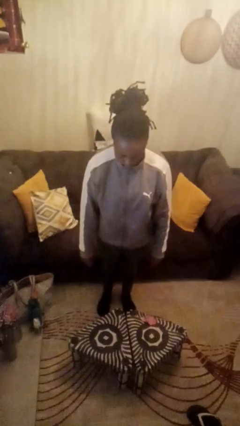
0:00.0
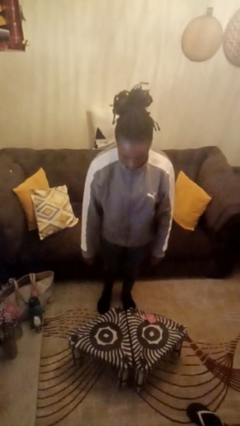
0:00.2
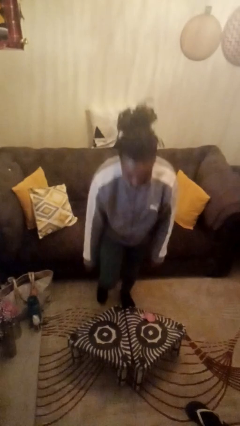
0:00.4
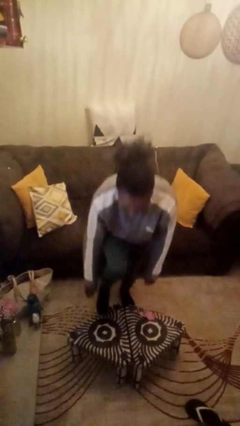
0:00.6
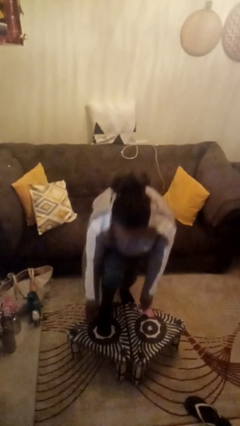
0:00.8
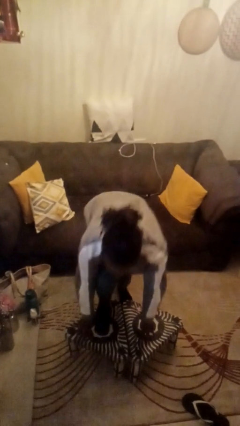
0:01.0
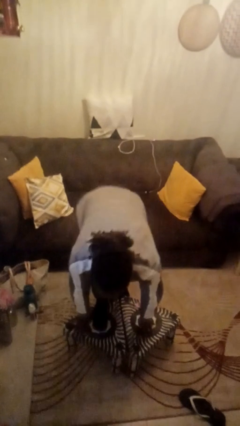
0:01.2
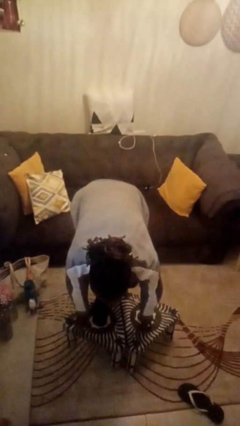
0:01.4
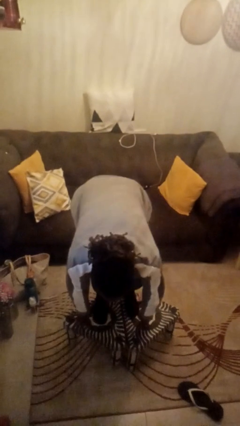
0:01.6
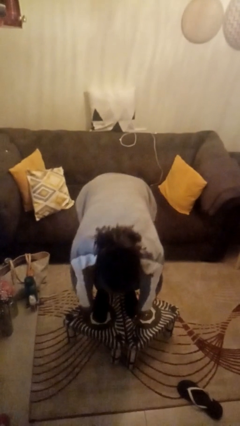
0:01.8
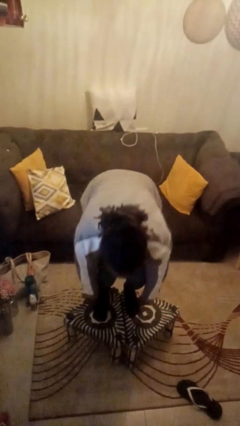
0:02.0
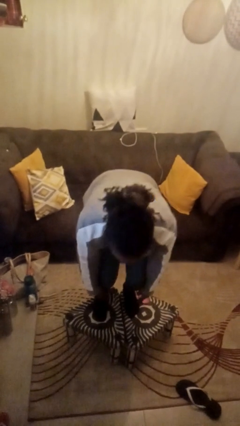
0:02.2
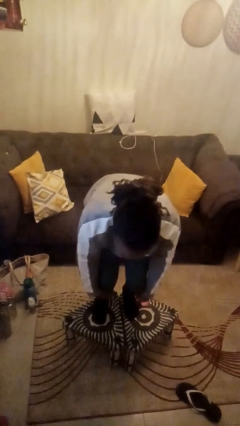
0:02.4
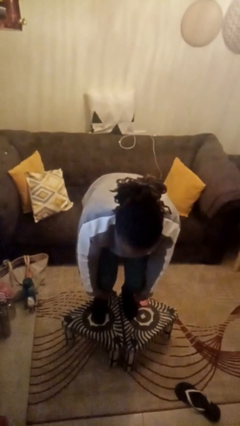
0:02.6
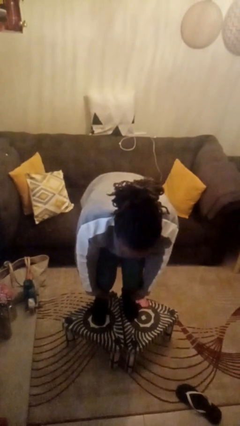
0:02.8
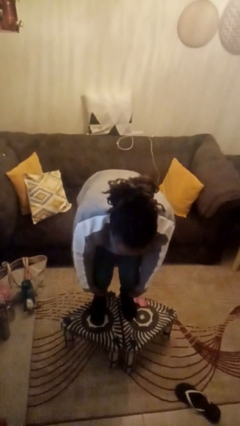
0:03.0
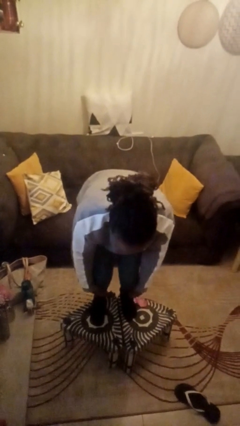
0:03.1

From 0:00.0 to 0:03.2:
person climbs on table

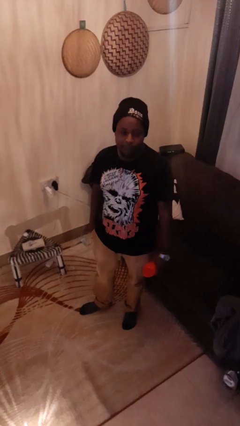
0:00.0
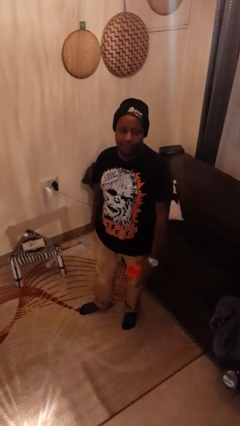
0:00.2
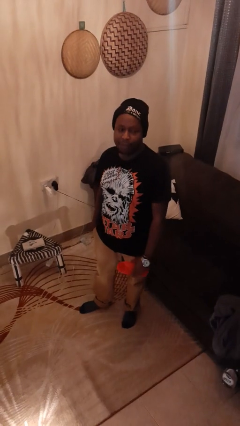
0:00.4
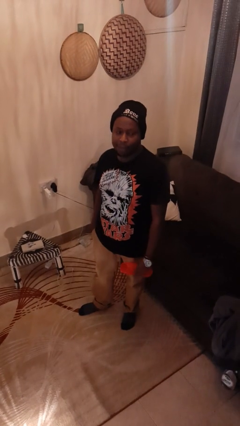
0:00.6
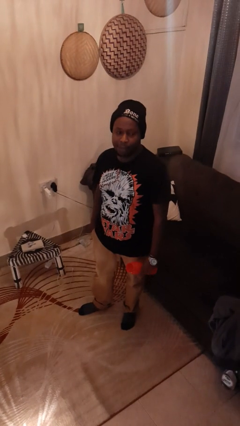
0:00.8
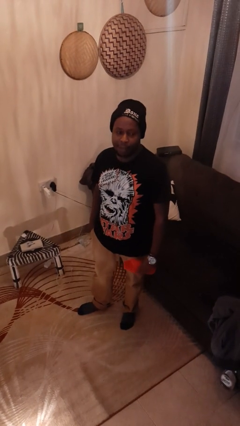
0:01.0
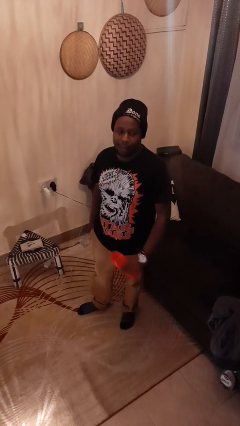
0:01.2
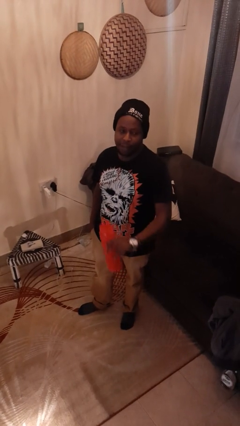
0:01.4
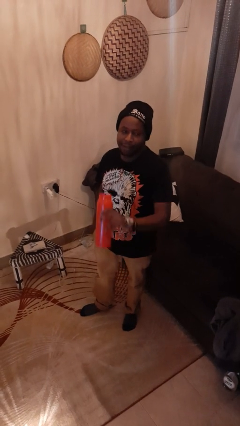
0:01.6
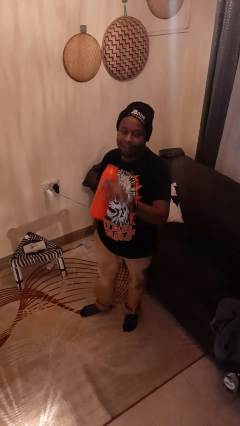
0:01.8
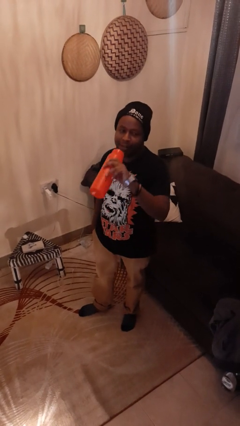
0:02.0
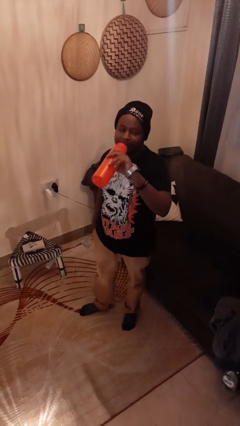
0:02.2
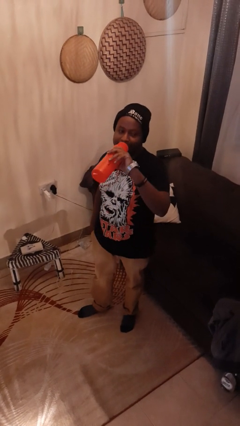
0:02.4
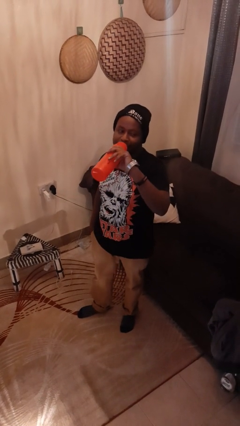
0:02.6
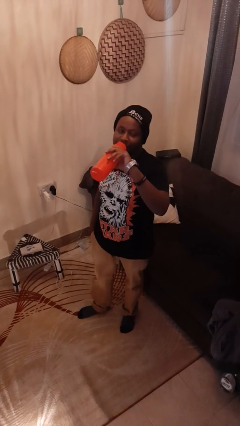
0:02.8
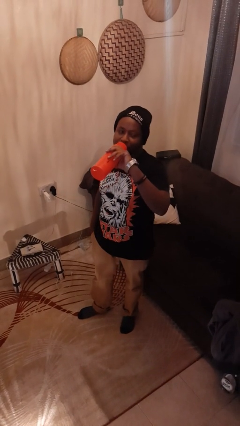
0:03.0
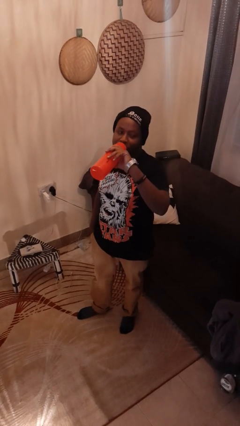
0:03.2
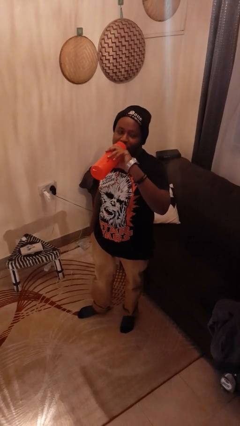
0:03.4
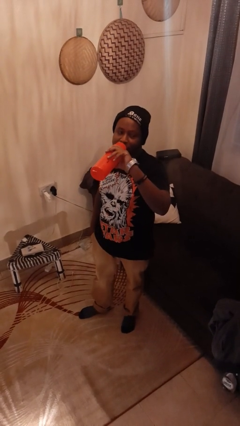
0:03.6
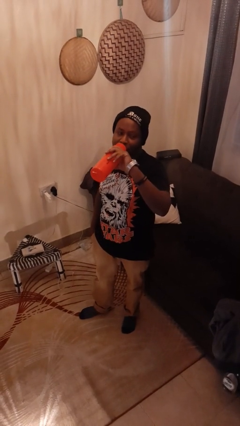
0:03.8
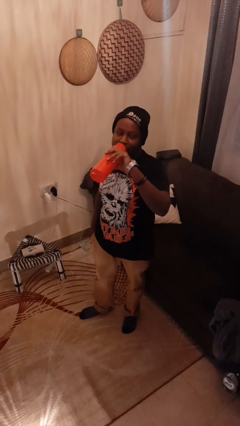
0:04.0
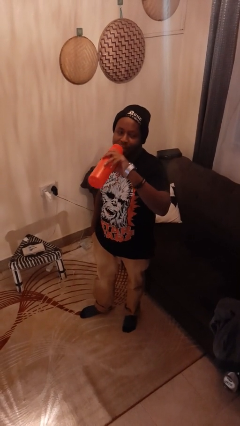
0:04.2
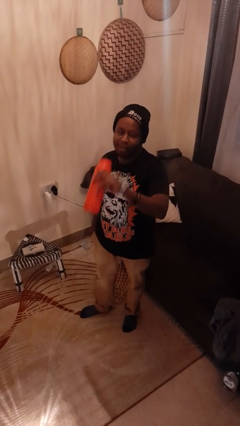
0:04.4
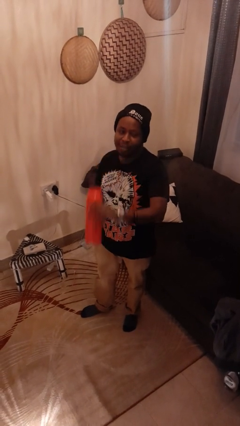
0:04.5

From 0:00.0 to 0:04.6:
person drinks from bottle

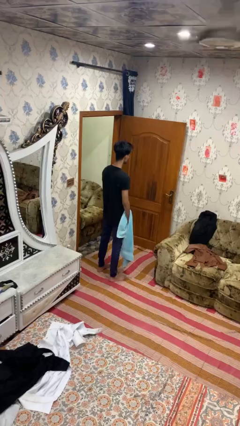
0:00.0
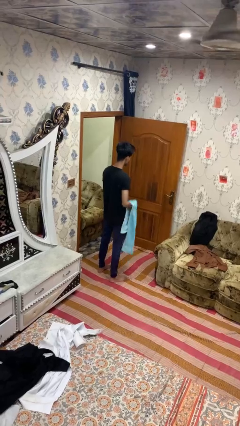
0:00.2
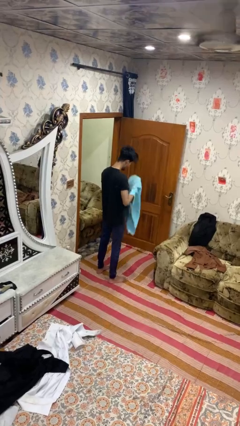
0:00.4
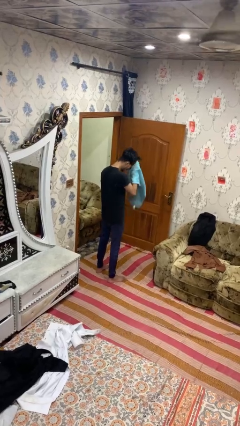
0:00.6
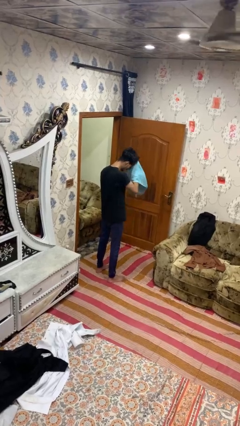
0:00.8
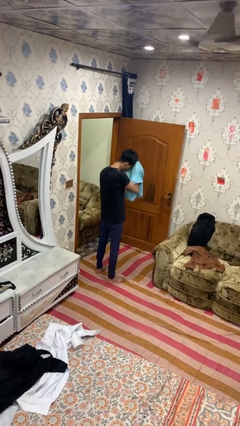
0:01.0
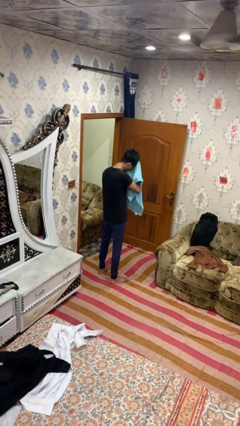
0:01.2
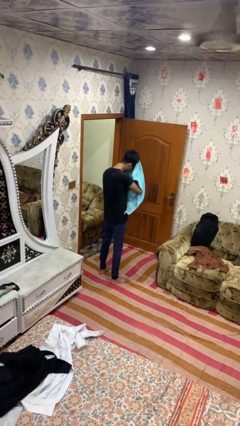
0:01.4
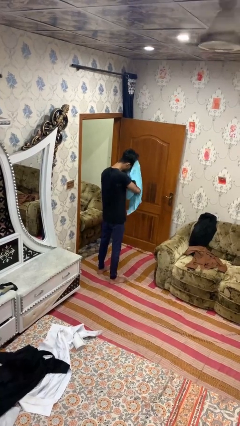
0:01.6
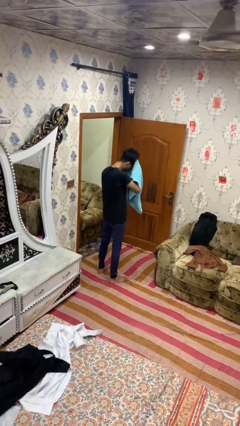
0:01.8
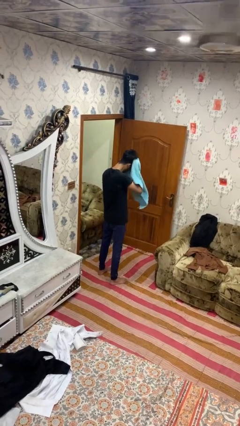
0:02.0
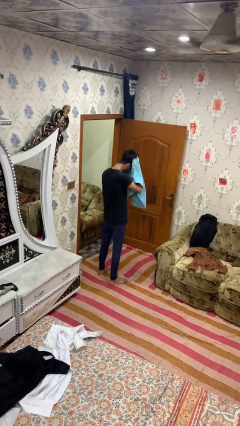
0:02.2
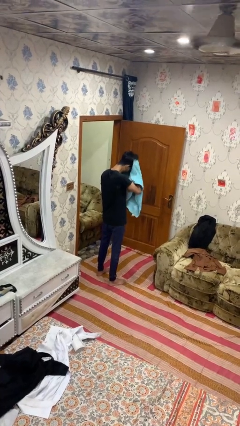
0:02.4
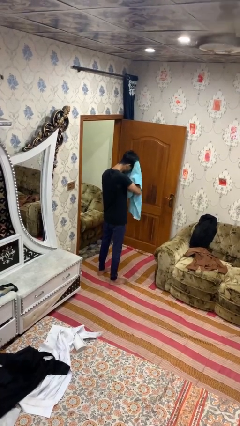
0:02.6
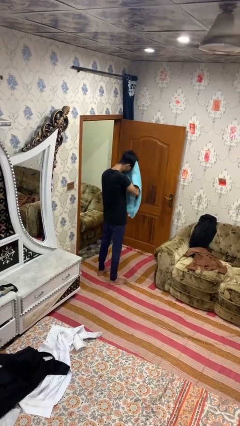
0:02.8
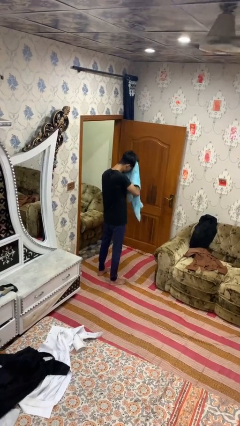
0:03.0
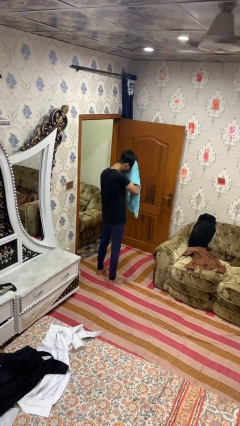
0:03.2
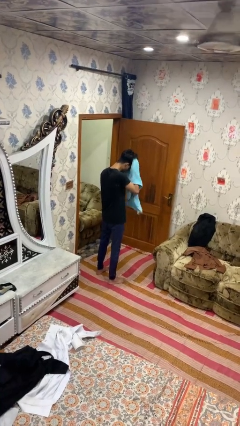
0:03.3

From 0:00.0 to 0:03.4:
person dries hair with towel

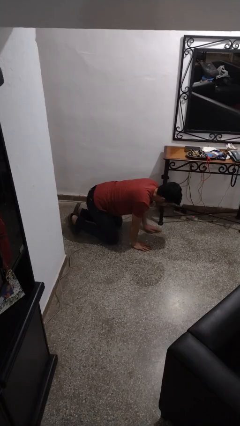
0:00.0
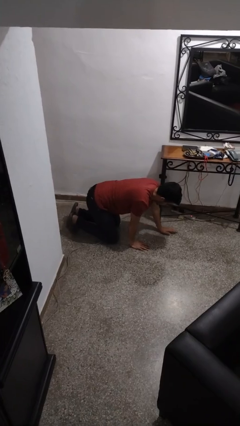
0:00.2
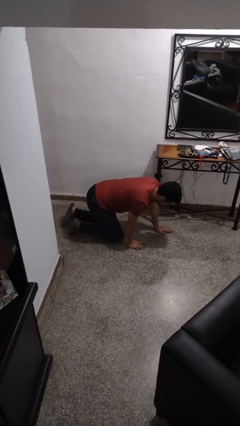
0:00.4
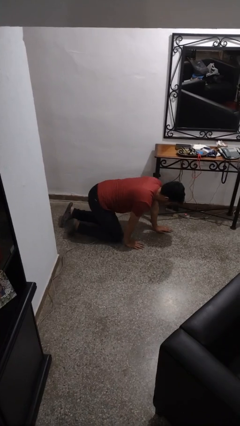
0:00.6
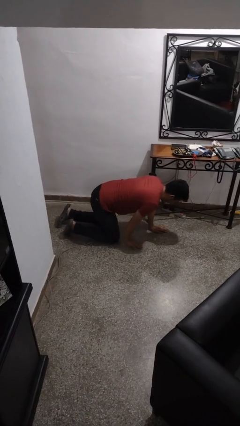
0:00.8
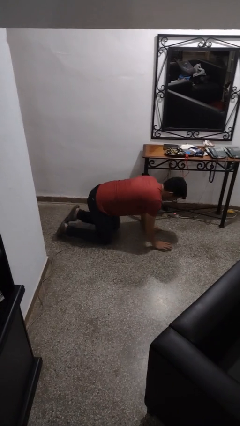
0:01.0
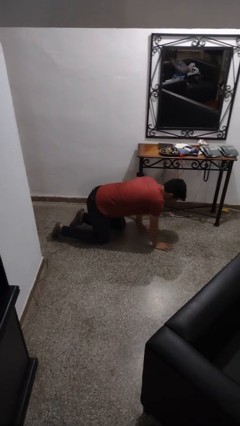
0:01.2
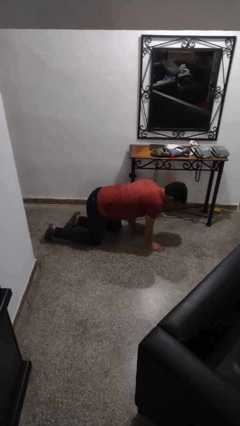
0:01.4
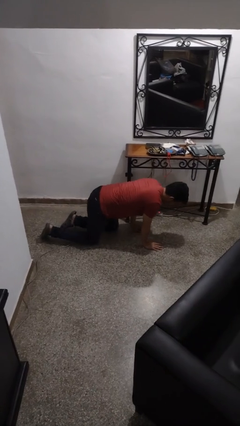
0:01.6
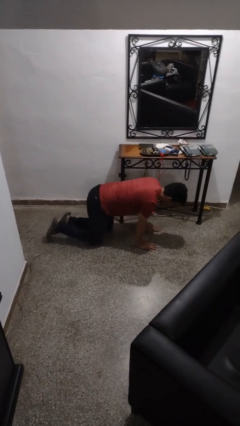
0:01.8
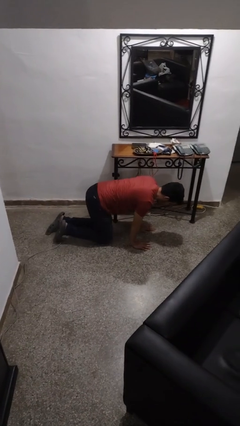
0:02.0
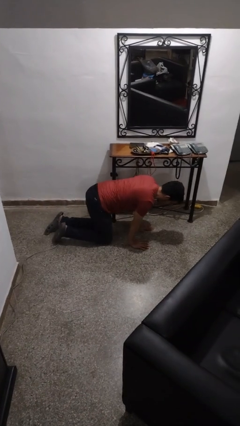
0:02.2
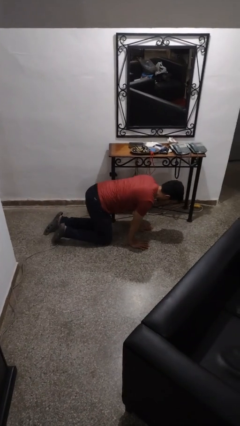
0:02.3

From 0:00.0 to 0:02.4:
person crawls

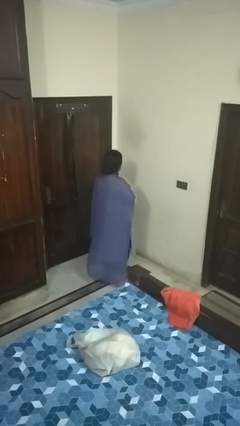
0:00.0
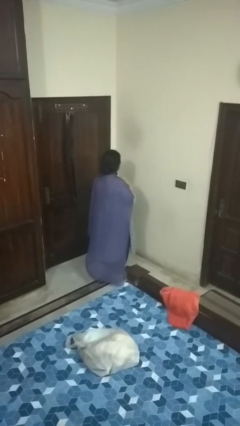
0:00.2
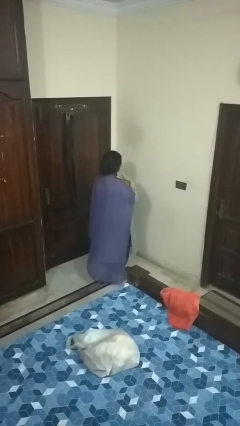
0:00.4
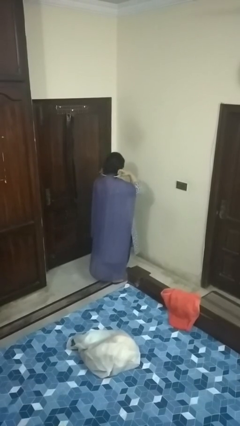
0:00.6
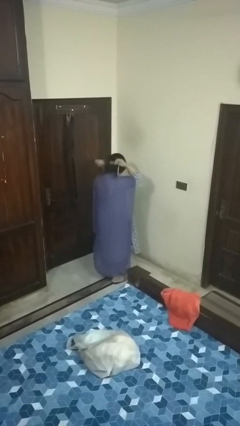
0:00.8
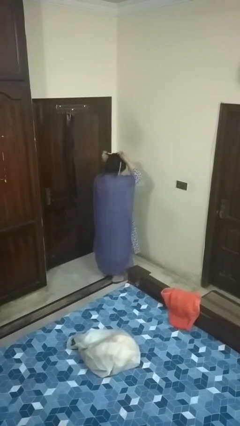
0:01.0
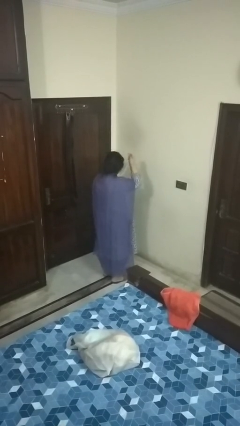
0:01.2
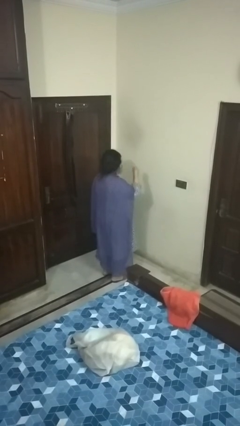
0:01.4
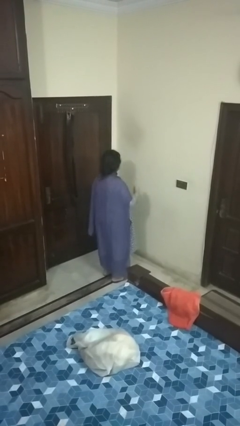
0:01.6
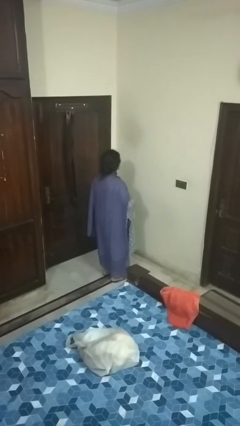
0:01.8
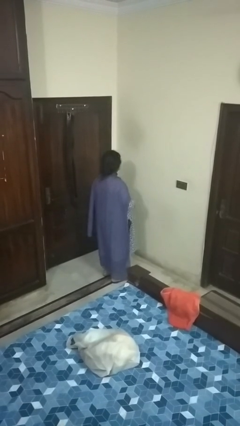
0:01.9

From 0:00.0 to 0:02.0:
person takes off necklace

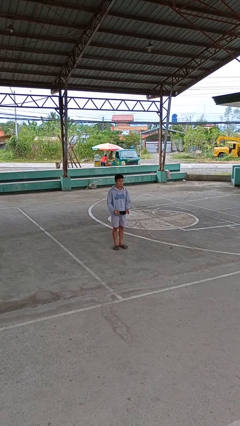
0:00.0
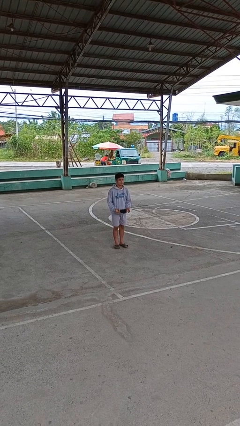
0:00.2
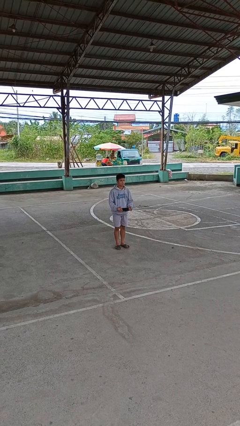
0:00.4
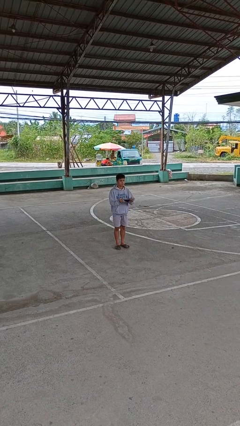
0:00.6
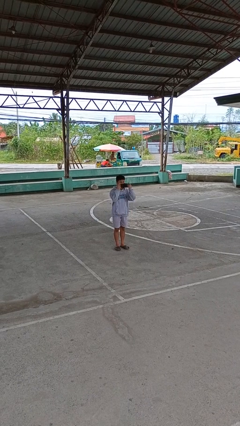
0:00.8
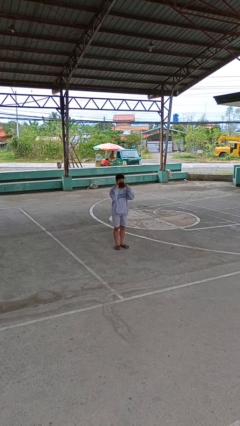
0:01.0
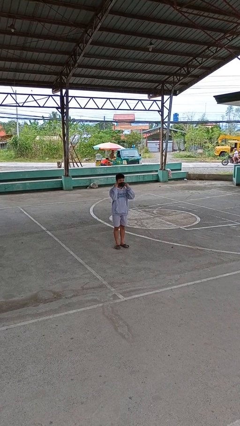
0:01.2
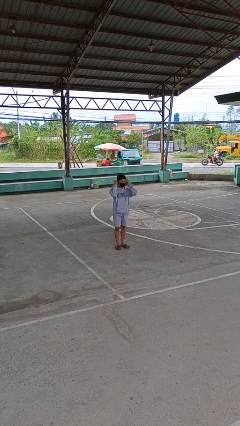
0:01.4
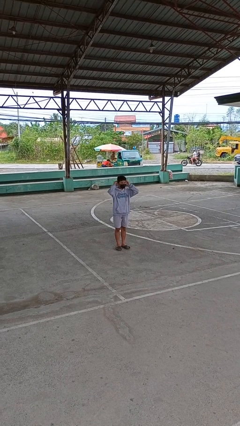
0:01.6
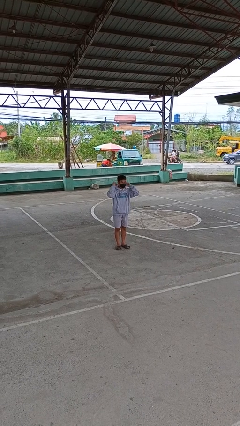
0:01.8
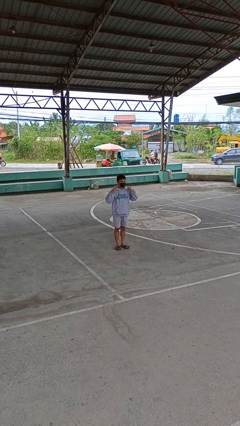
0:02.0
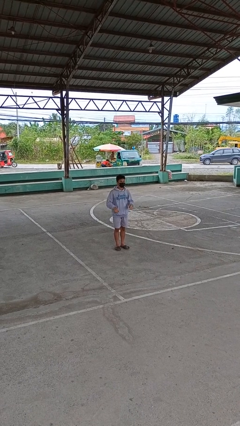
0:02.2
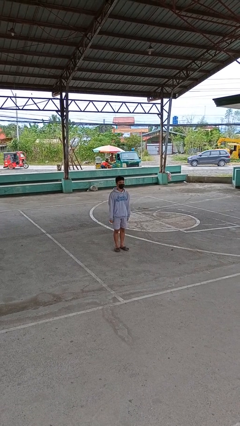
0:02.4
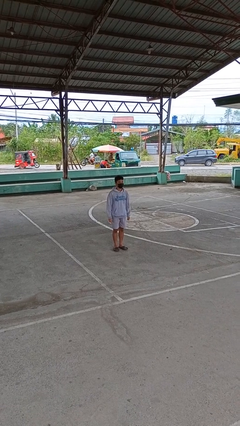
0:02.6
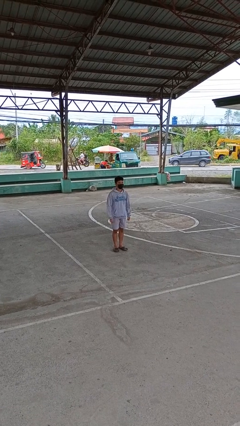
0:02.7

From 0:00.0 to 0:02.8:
person puts on facemask
